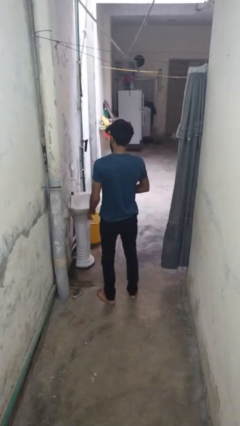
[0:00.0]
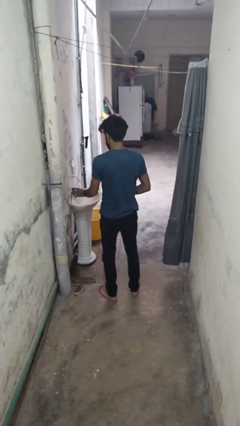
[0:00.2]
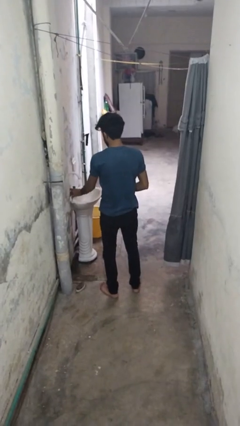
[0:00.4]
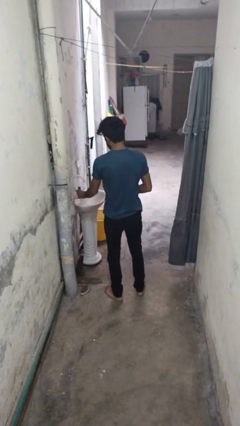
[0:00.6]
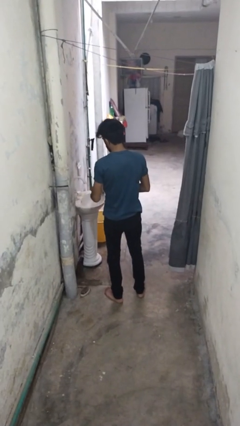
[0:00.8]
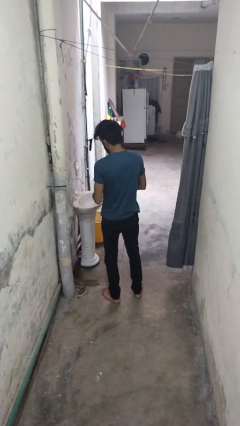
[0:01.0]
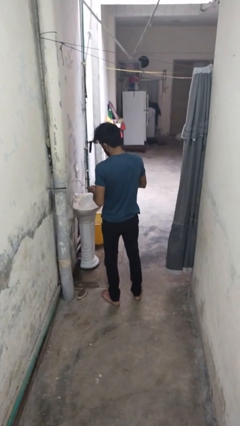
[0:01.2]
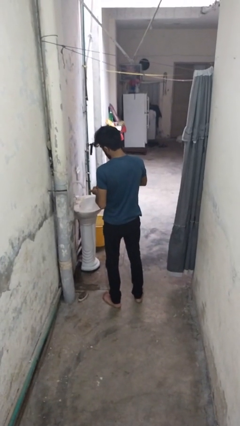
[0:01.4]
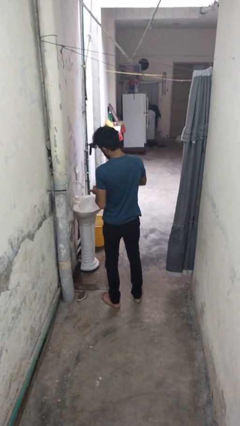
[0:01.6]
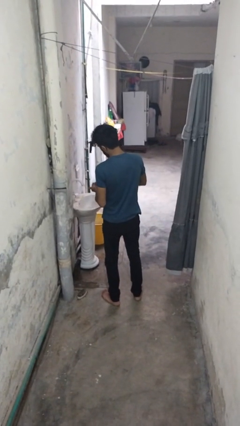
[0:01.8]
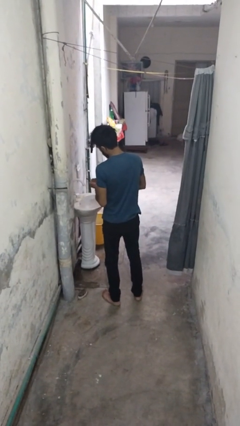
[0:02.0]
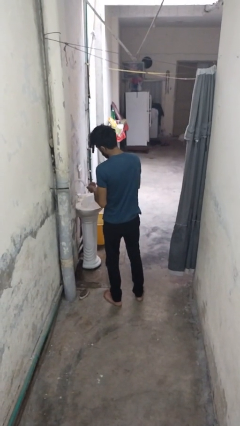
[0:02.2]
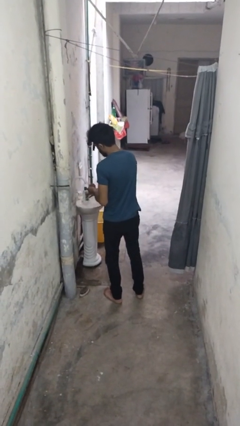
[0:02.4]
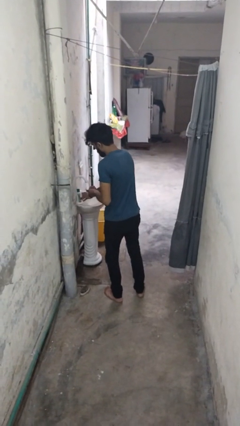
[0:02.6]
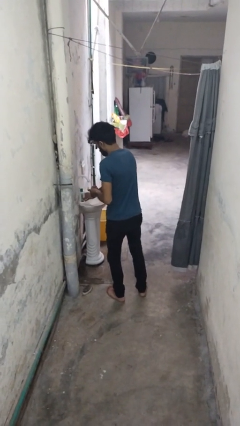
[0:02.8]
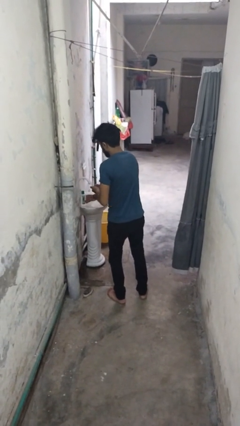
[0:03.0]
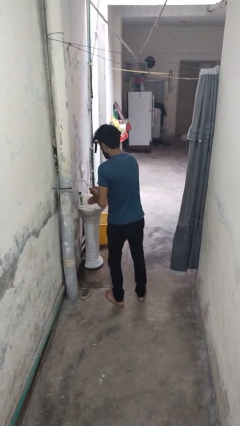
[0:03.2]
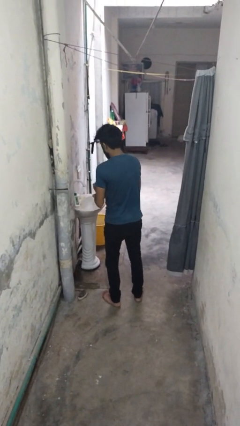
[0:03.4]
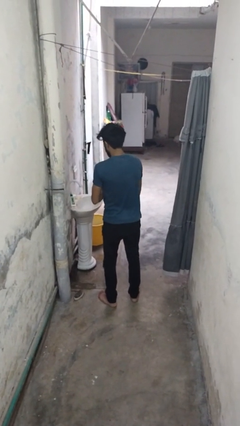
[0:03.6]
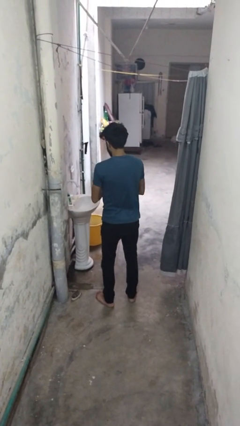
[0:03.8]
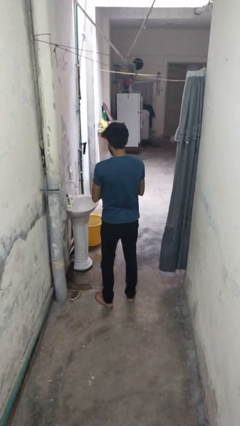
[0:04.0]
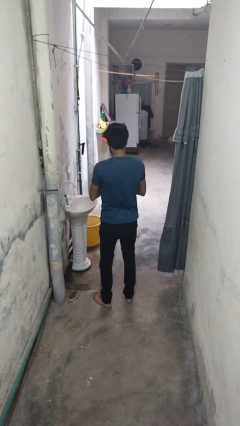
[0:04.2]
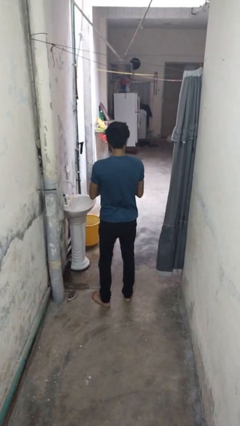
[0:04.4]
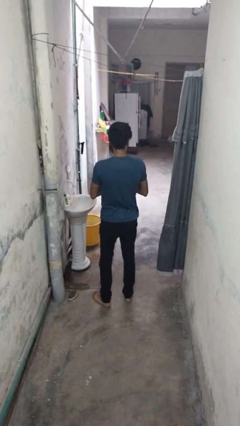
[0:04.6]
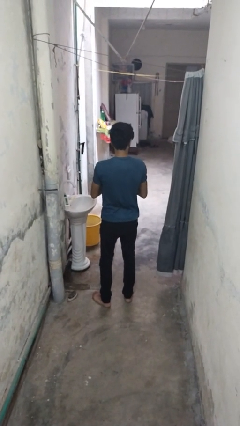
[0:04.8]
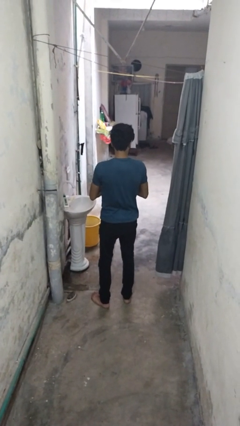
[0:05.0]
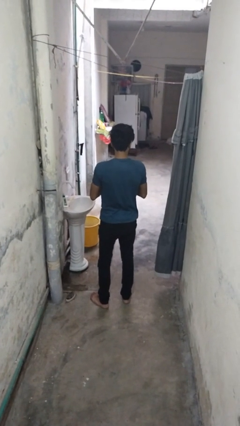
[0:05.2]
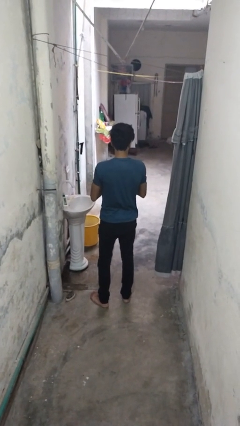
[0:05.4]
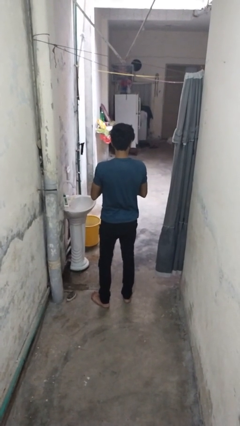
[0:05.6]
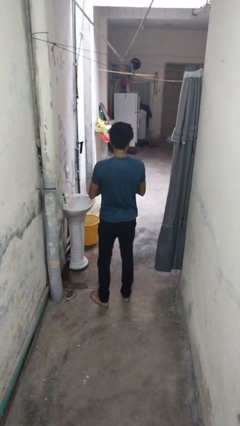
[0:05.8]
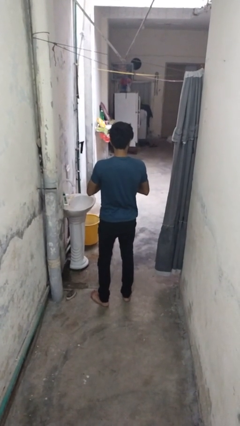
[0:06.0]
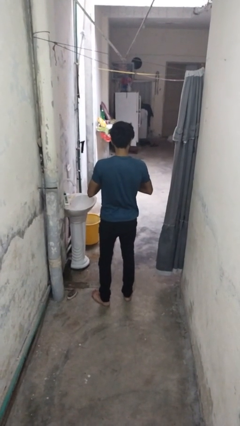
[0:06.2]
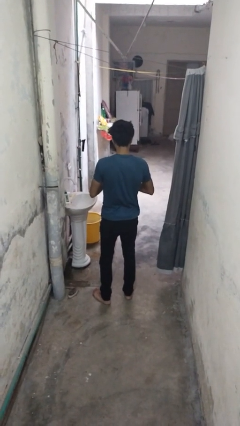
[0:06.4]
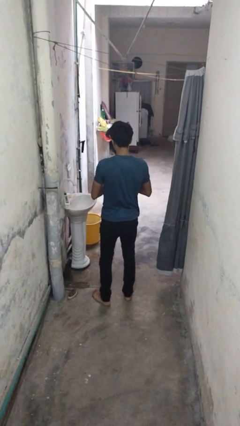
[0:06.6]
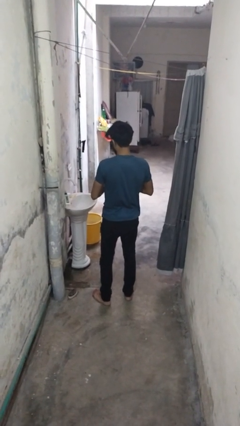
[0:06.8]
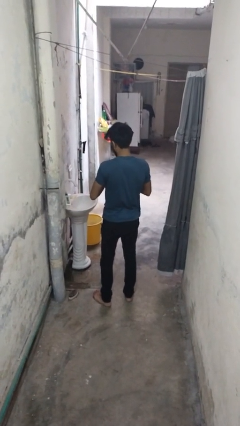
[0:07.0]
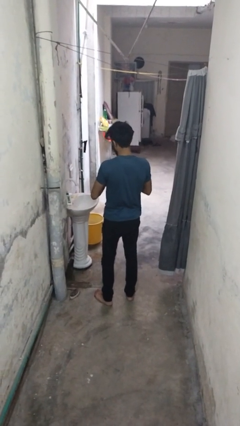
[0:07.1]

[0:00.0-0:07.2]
person applies sunscreen

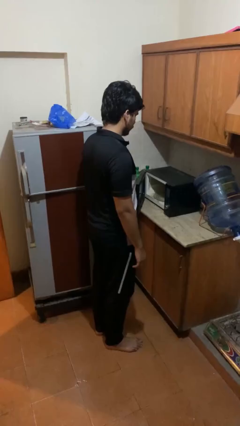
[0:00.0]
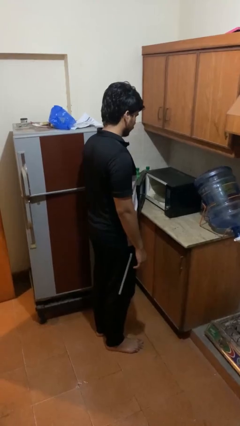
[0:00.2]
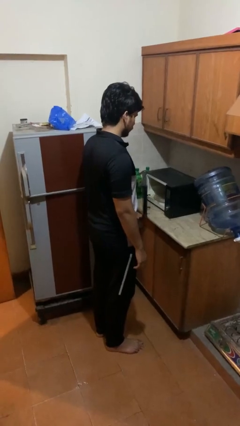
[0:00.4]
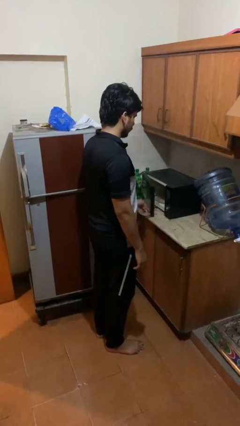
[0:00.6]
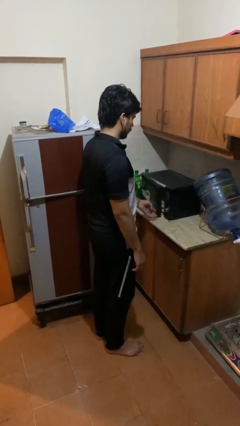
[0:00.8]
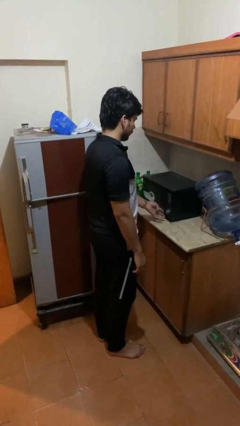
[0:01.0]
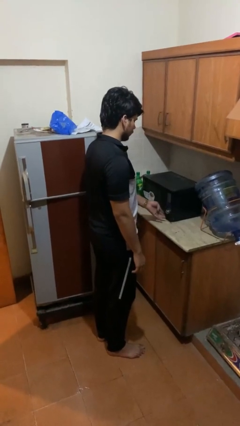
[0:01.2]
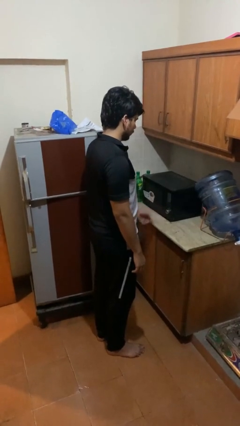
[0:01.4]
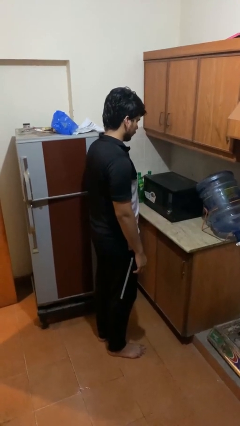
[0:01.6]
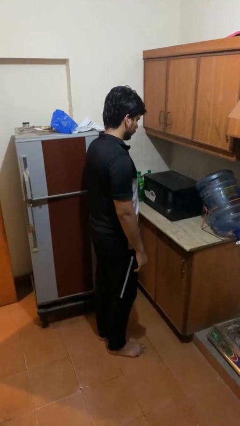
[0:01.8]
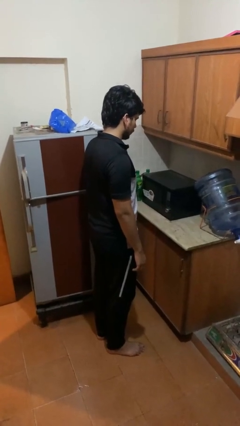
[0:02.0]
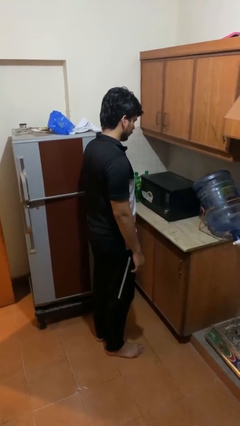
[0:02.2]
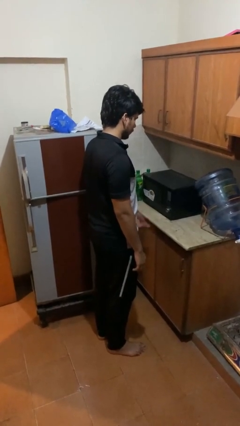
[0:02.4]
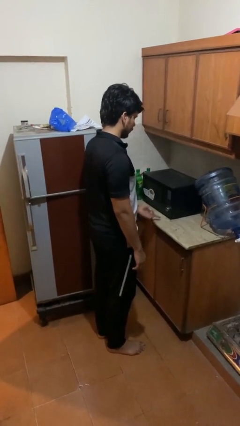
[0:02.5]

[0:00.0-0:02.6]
person closes oven door

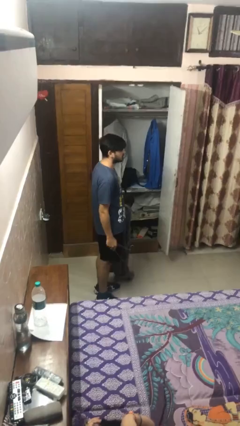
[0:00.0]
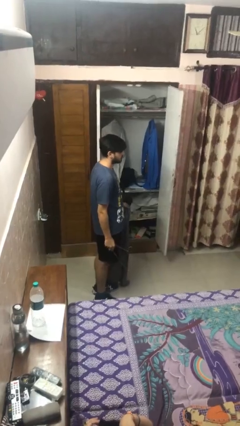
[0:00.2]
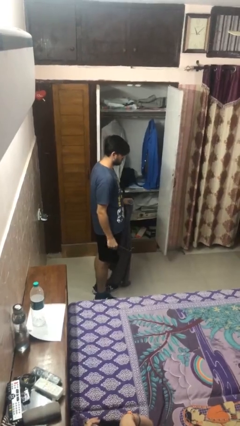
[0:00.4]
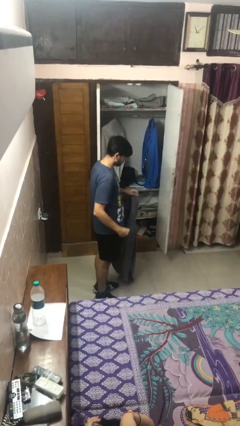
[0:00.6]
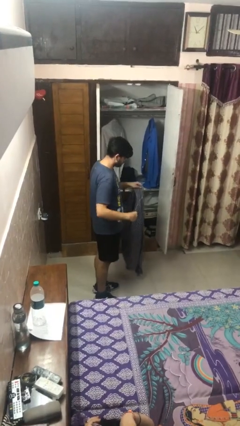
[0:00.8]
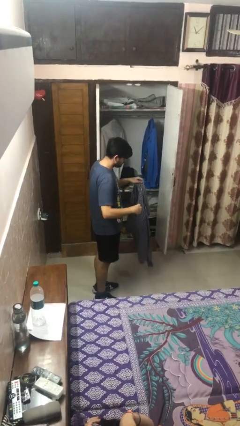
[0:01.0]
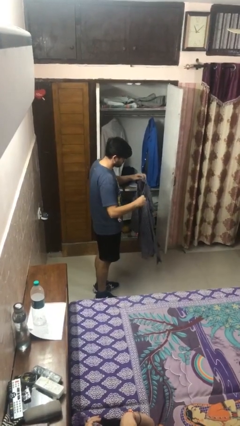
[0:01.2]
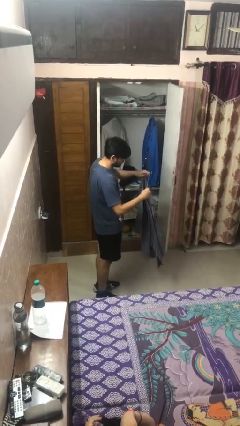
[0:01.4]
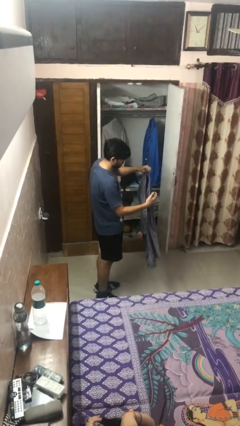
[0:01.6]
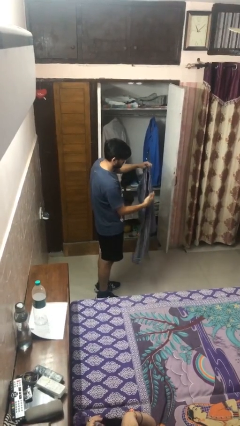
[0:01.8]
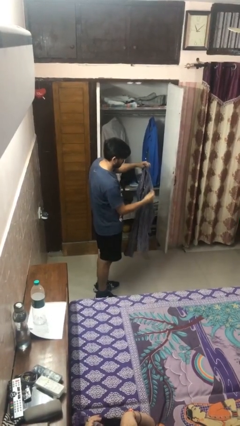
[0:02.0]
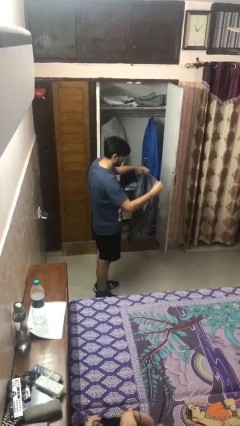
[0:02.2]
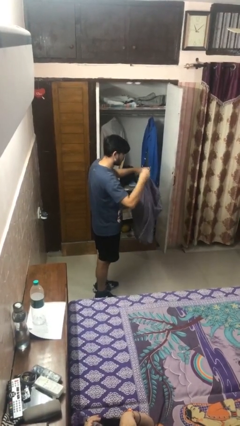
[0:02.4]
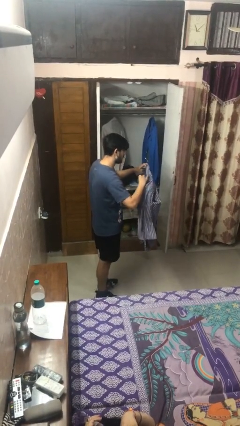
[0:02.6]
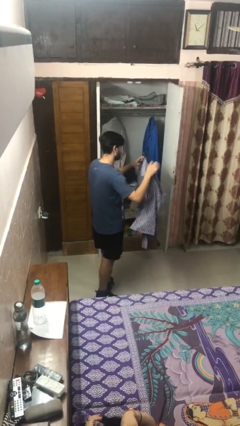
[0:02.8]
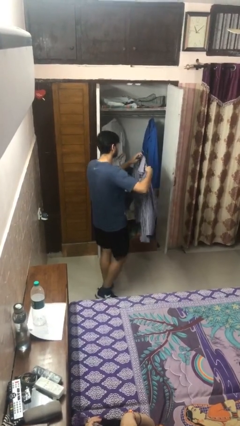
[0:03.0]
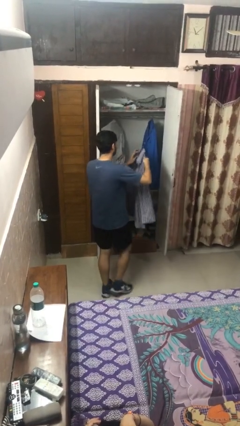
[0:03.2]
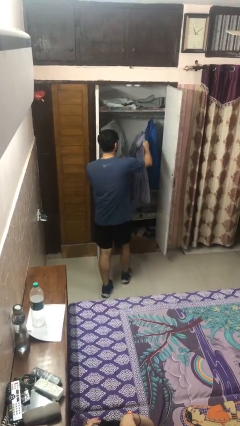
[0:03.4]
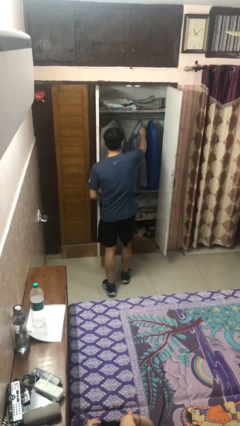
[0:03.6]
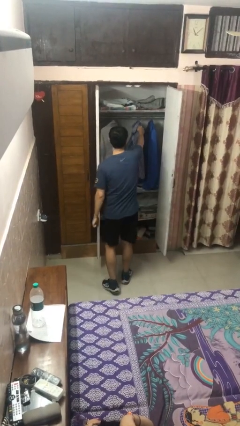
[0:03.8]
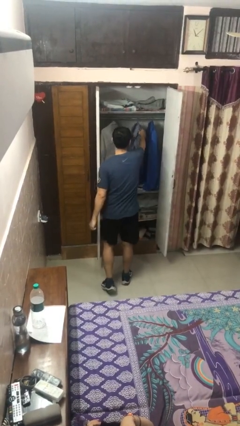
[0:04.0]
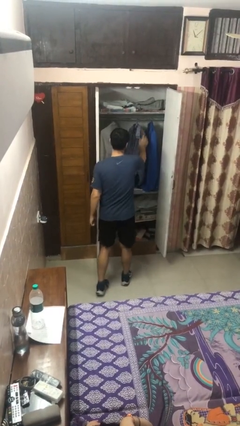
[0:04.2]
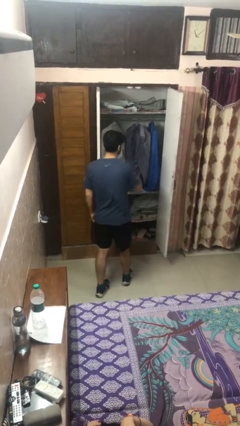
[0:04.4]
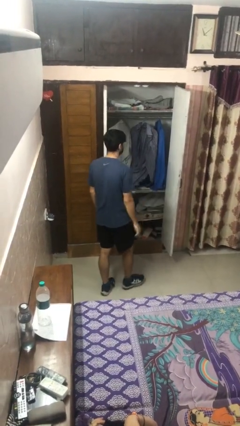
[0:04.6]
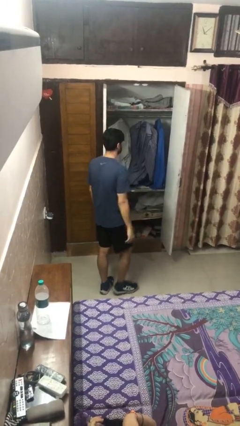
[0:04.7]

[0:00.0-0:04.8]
person puts clothes into closet

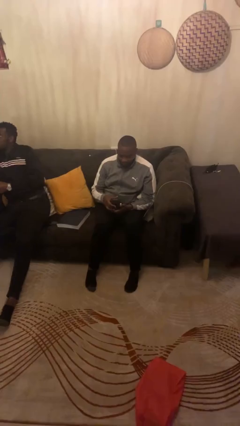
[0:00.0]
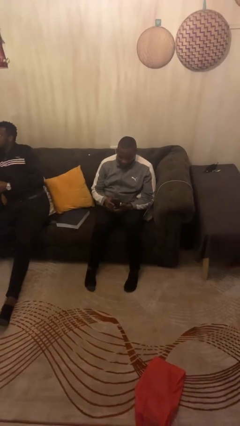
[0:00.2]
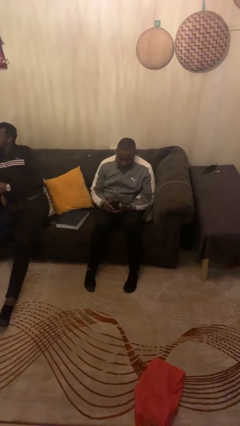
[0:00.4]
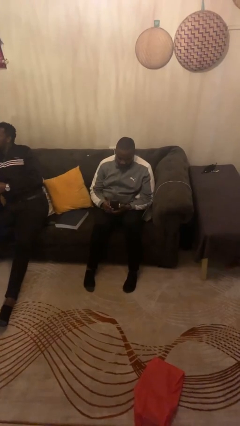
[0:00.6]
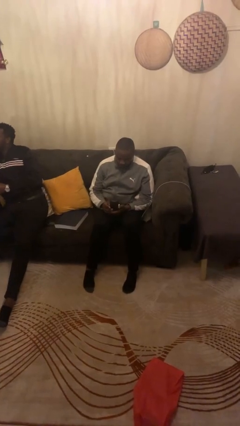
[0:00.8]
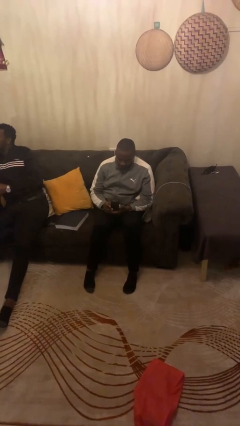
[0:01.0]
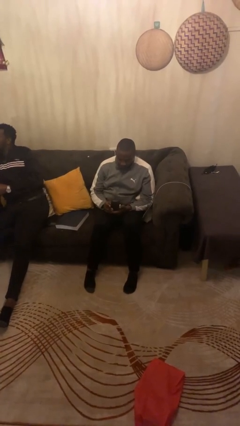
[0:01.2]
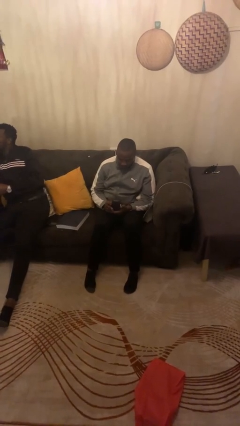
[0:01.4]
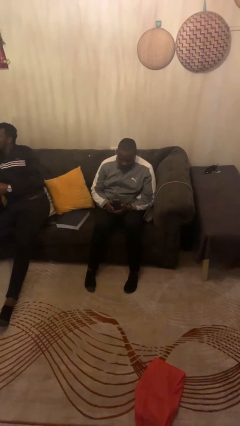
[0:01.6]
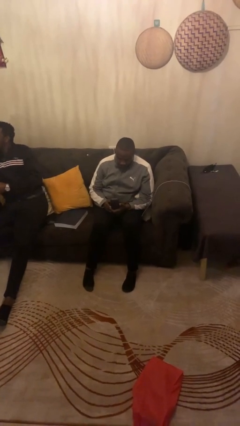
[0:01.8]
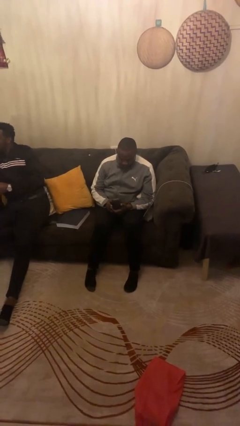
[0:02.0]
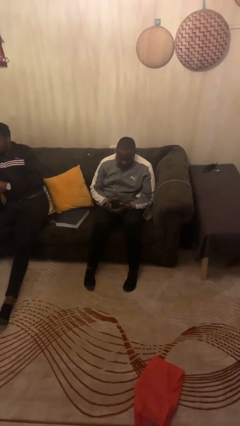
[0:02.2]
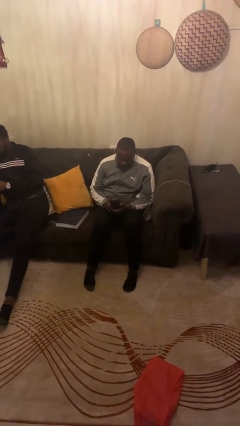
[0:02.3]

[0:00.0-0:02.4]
person opens jewelry box

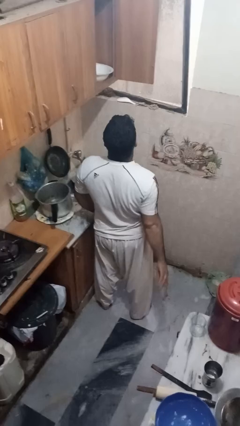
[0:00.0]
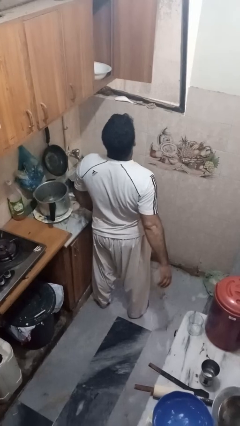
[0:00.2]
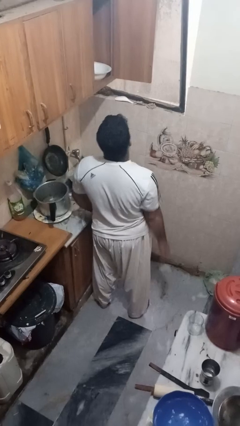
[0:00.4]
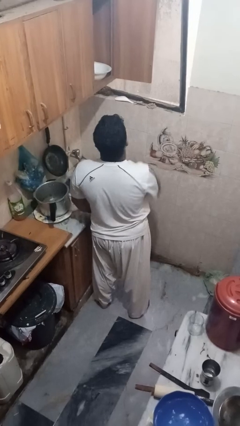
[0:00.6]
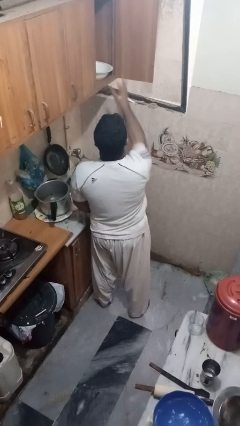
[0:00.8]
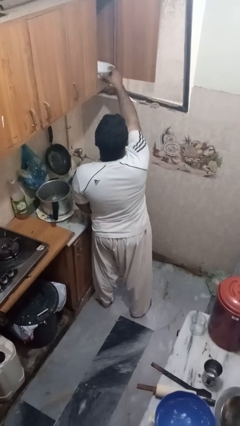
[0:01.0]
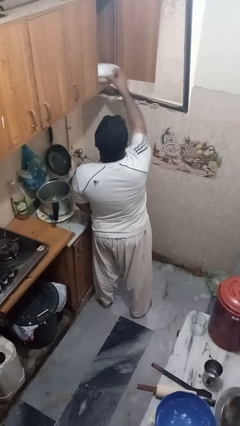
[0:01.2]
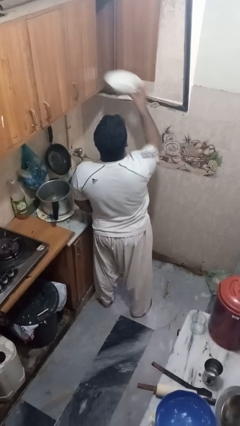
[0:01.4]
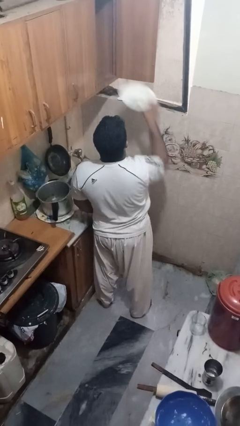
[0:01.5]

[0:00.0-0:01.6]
person takes object from cabinet
